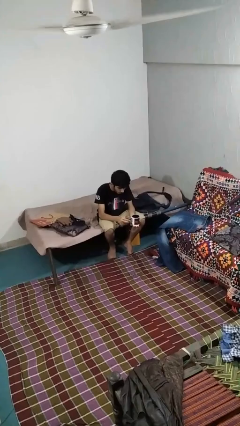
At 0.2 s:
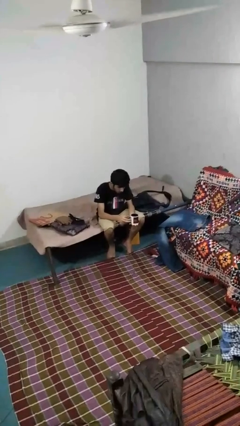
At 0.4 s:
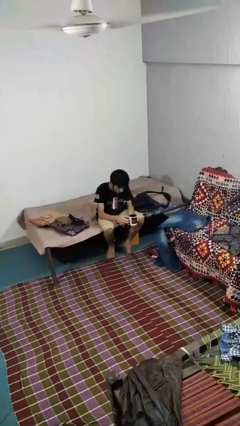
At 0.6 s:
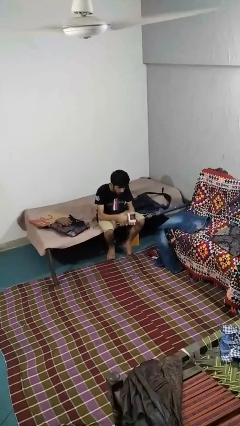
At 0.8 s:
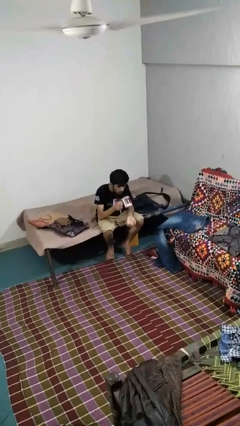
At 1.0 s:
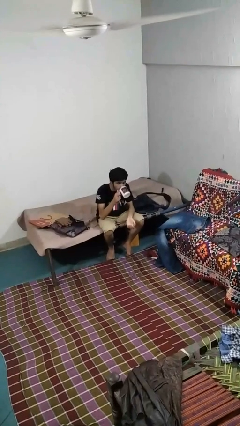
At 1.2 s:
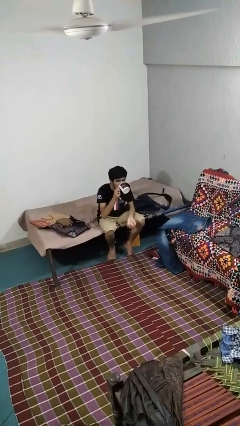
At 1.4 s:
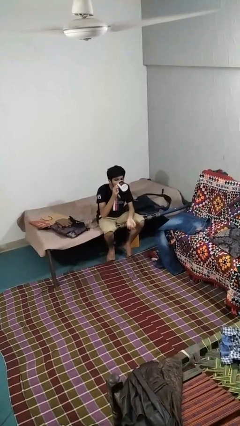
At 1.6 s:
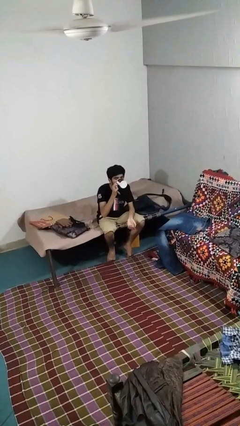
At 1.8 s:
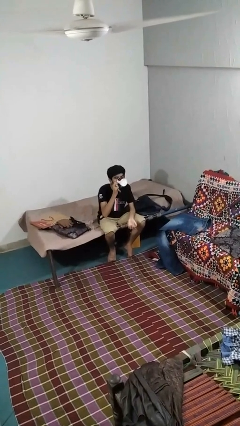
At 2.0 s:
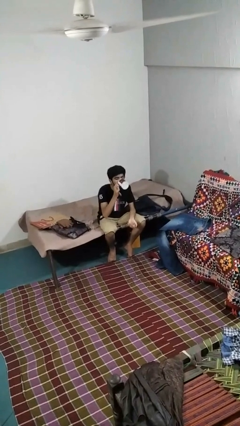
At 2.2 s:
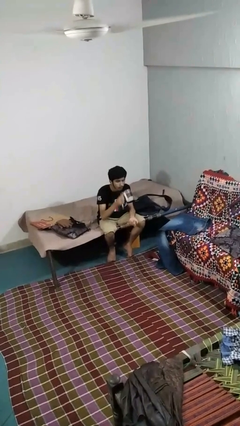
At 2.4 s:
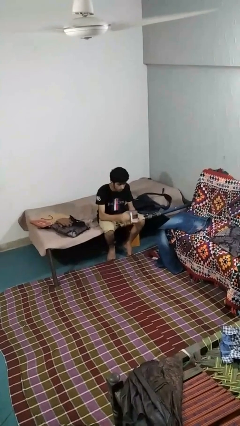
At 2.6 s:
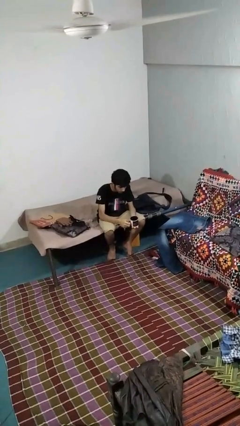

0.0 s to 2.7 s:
person drinks from mug

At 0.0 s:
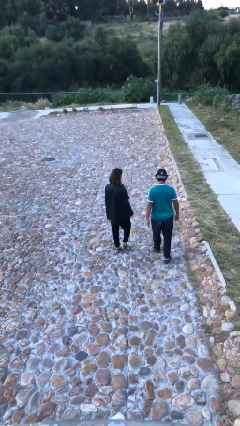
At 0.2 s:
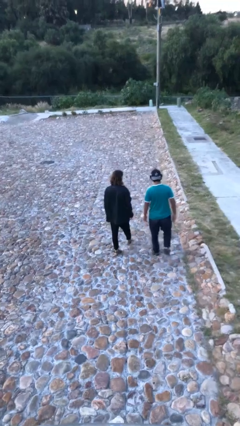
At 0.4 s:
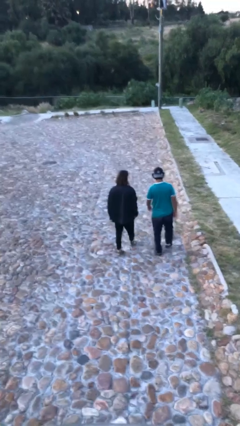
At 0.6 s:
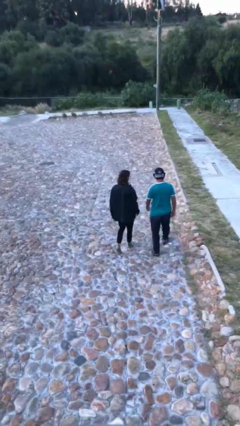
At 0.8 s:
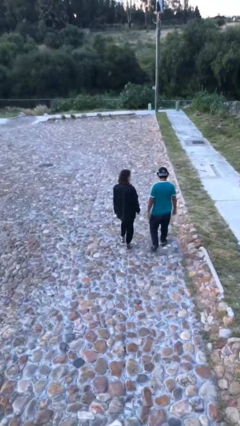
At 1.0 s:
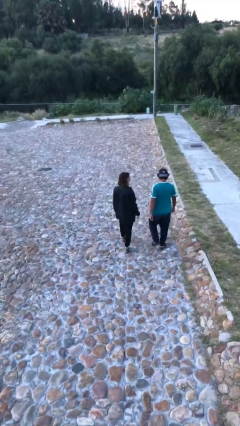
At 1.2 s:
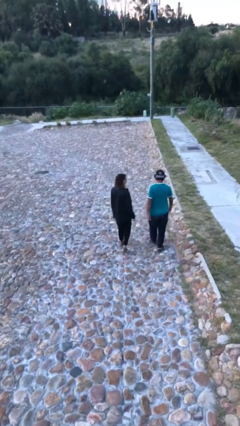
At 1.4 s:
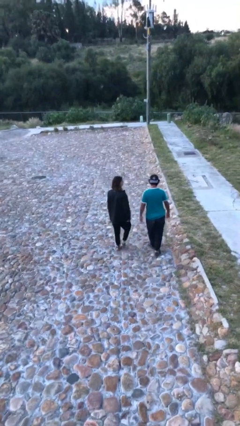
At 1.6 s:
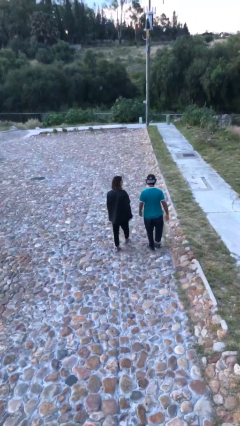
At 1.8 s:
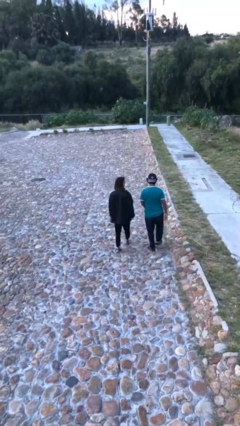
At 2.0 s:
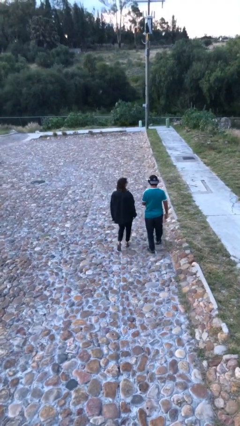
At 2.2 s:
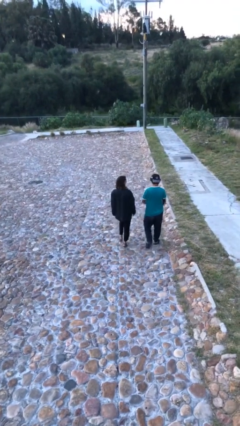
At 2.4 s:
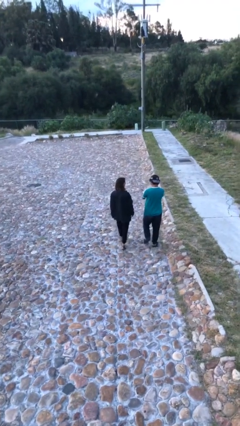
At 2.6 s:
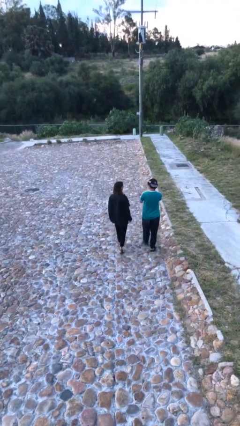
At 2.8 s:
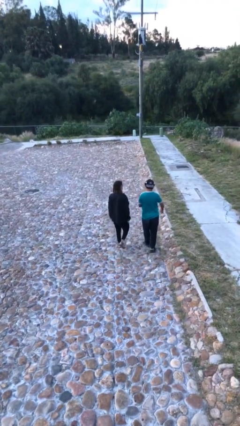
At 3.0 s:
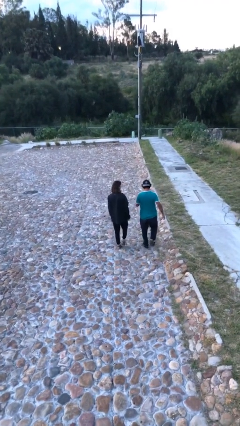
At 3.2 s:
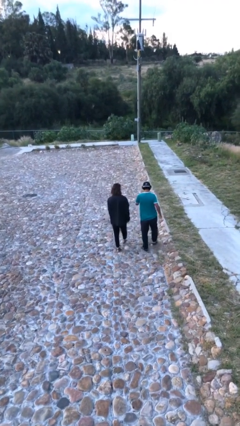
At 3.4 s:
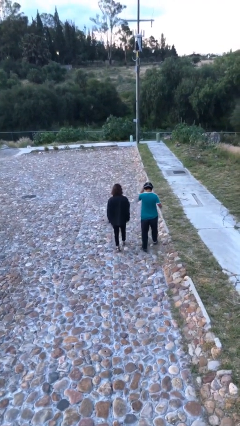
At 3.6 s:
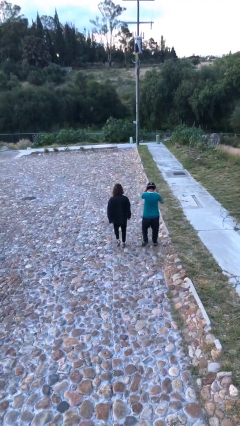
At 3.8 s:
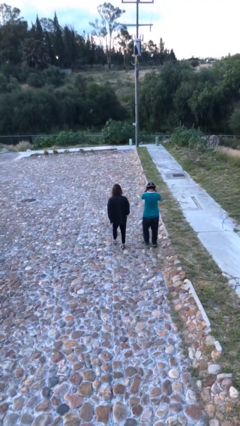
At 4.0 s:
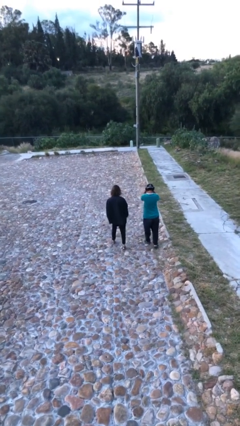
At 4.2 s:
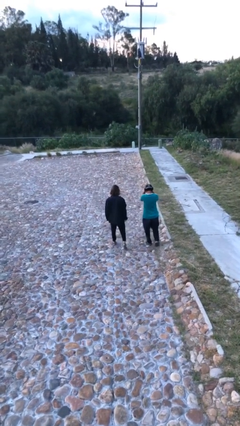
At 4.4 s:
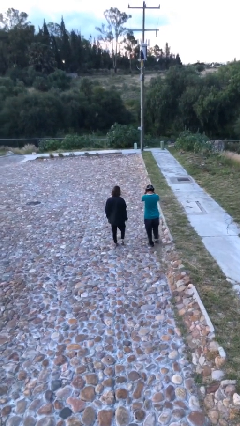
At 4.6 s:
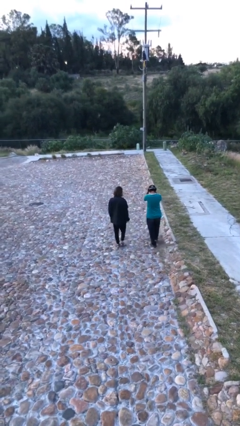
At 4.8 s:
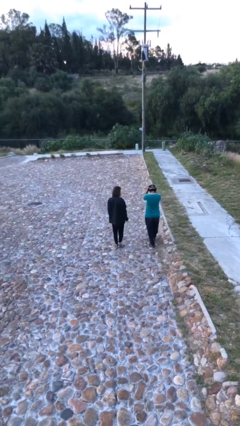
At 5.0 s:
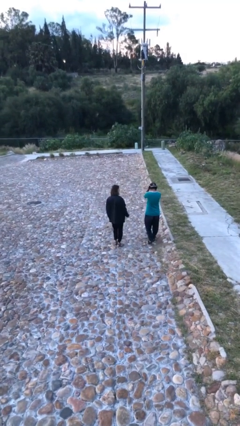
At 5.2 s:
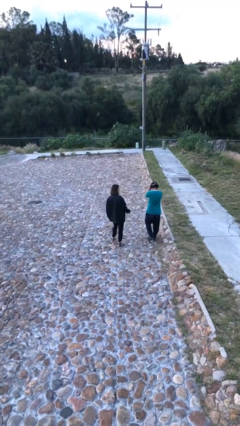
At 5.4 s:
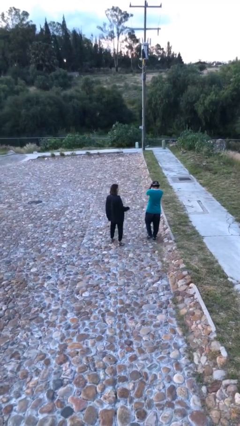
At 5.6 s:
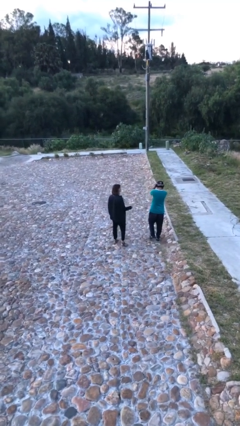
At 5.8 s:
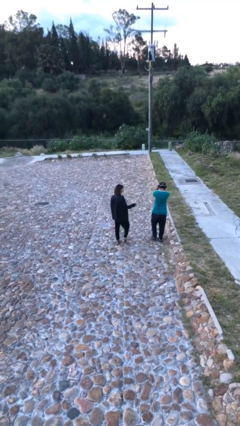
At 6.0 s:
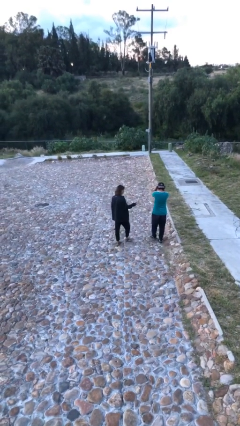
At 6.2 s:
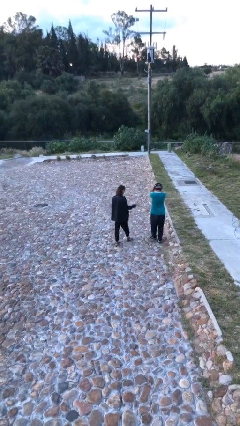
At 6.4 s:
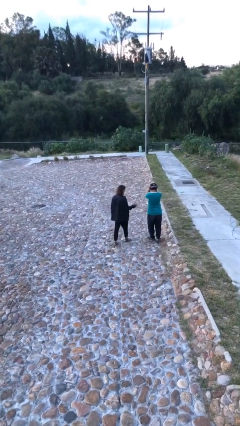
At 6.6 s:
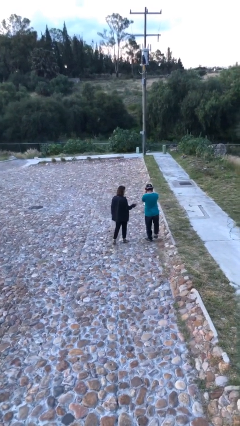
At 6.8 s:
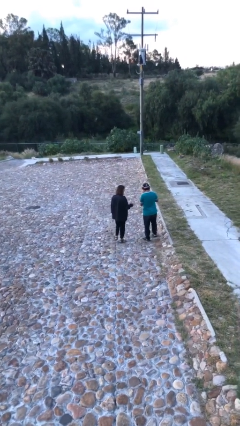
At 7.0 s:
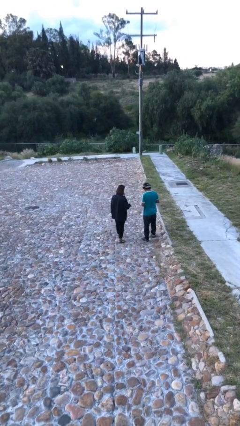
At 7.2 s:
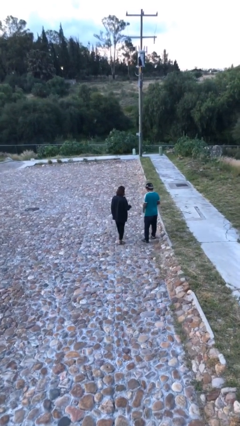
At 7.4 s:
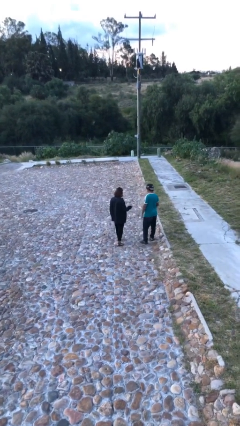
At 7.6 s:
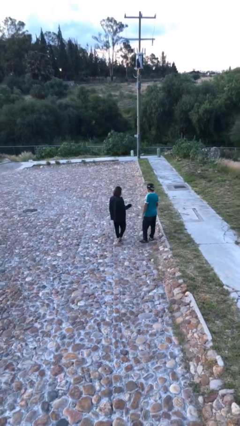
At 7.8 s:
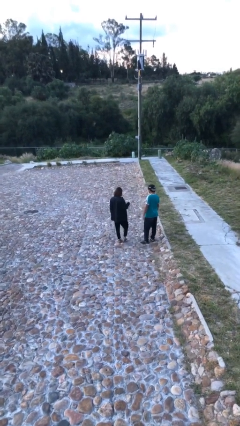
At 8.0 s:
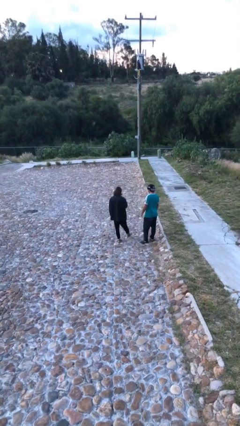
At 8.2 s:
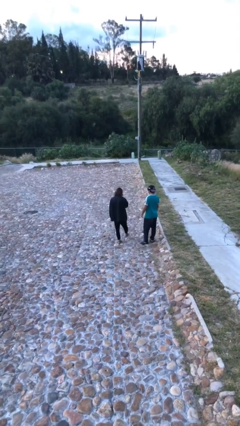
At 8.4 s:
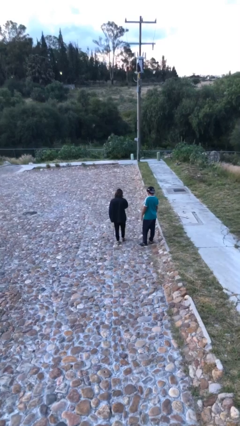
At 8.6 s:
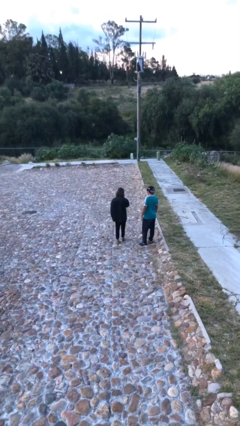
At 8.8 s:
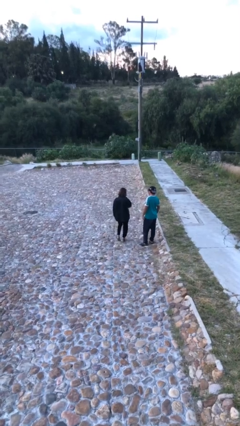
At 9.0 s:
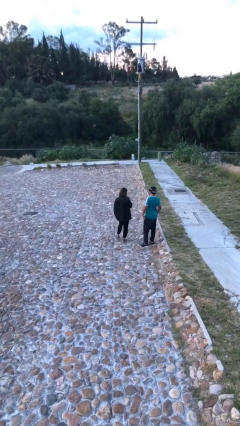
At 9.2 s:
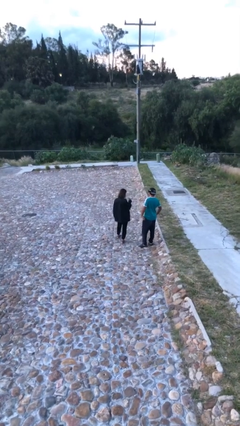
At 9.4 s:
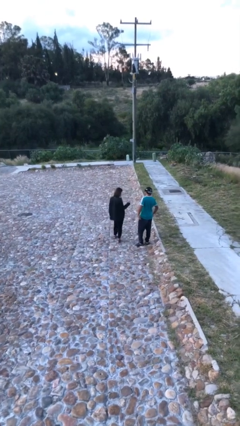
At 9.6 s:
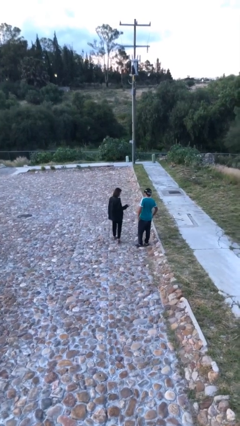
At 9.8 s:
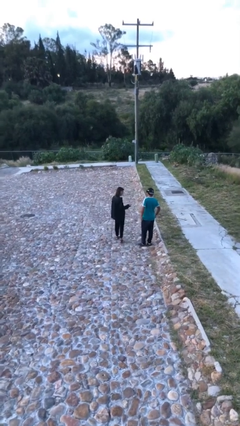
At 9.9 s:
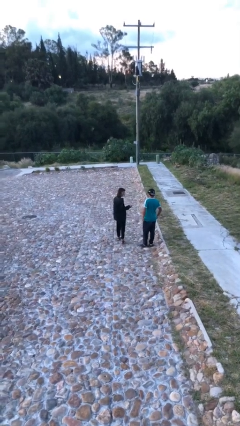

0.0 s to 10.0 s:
person talks to person

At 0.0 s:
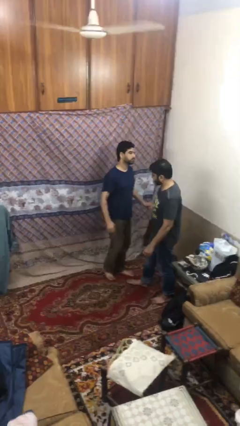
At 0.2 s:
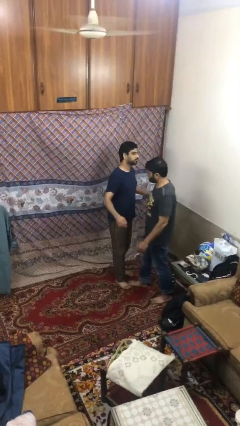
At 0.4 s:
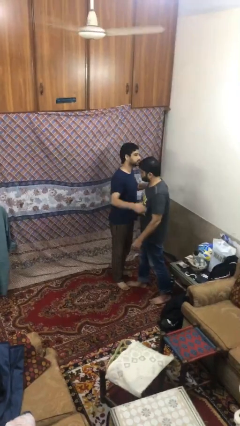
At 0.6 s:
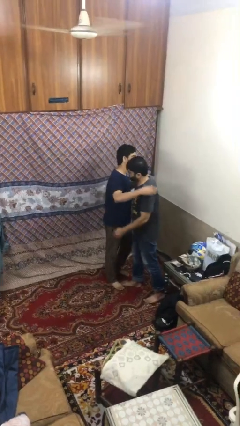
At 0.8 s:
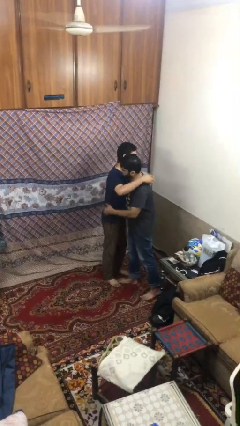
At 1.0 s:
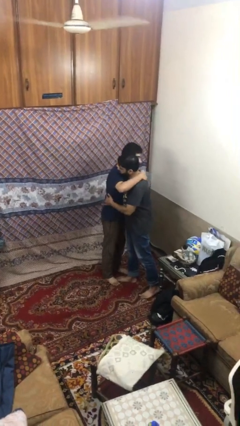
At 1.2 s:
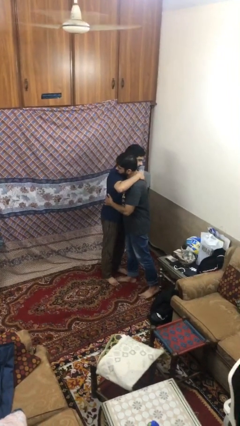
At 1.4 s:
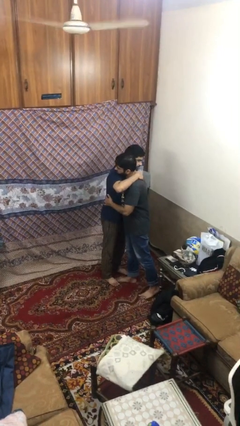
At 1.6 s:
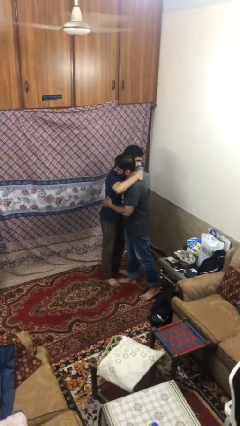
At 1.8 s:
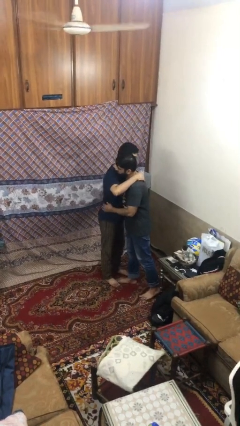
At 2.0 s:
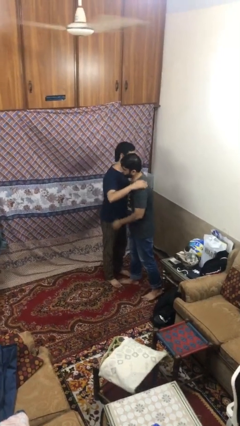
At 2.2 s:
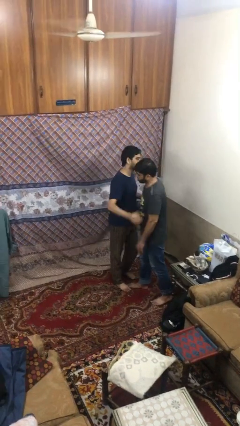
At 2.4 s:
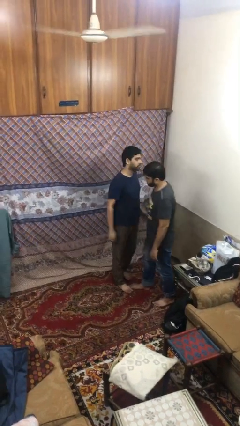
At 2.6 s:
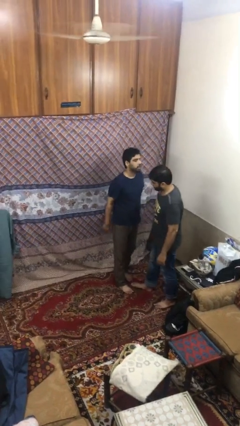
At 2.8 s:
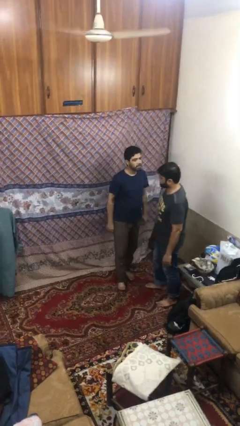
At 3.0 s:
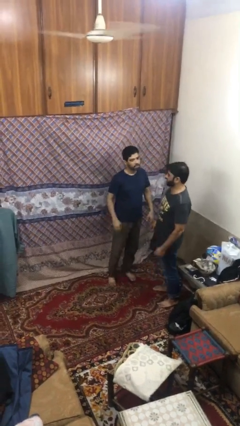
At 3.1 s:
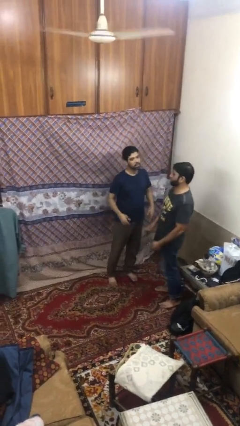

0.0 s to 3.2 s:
person embraces person

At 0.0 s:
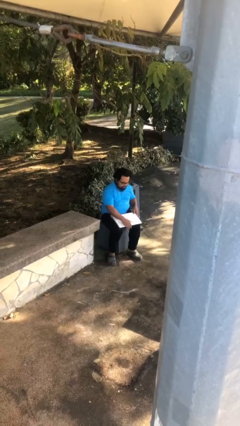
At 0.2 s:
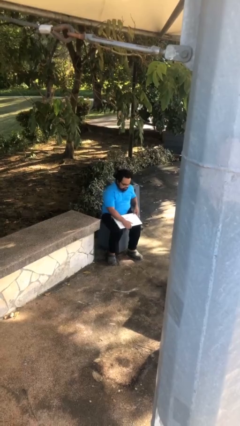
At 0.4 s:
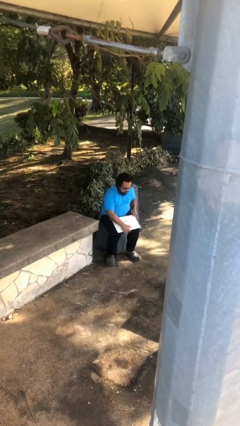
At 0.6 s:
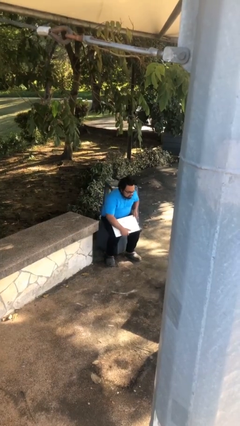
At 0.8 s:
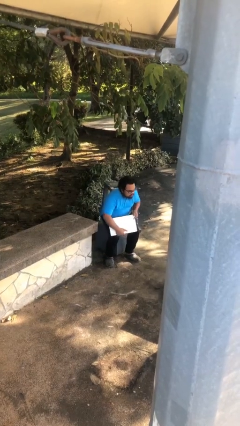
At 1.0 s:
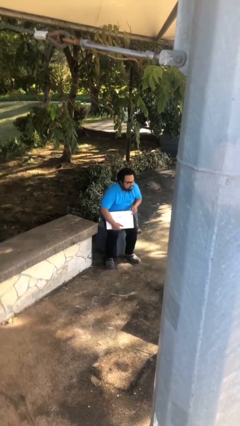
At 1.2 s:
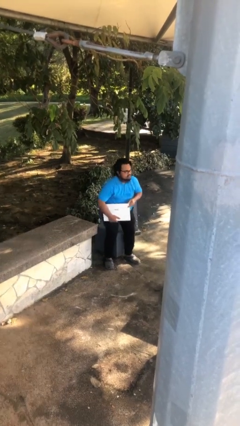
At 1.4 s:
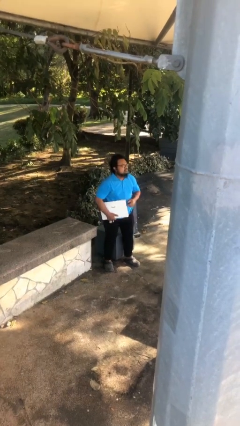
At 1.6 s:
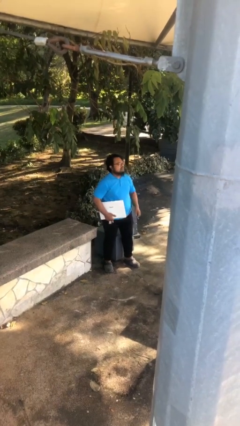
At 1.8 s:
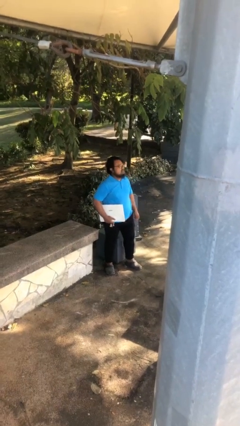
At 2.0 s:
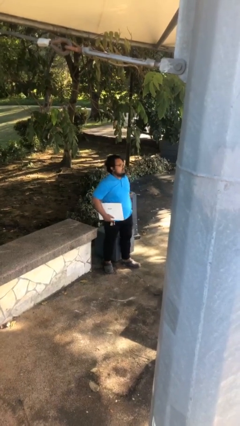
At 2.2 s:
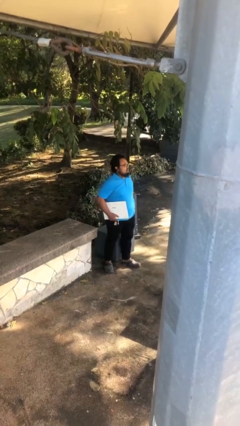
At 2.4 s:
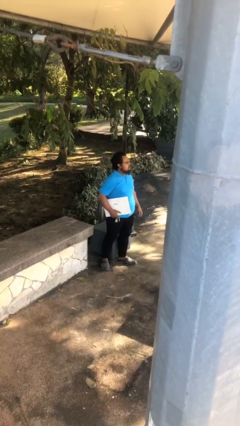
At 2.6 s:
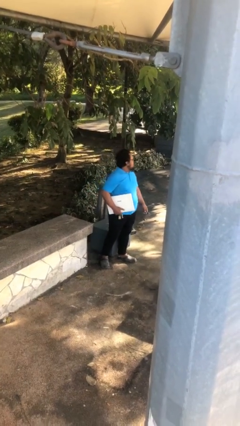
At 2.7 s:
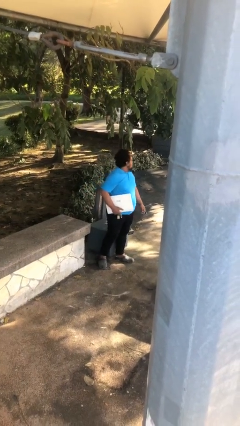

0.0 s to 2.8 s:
person stands up
